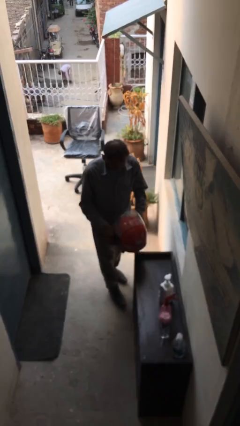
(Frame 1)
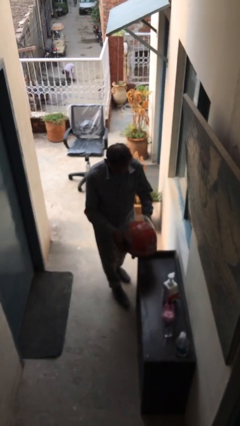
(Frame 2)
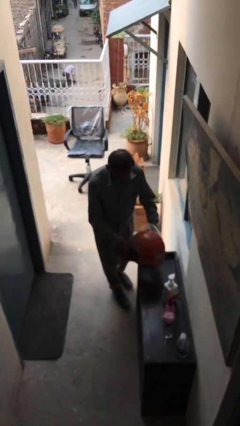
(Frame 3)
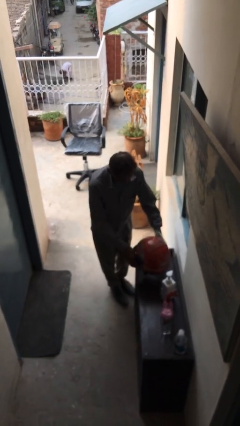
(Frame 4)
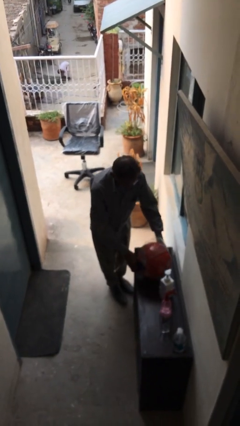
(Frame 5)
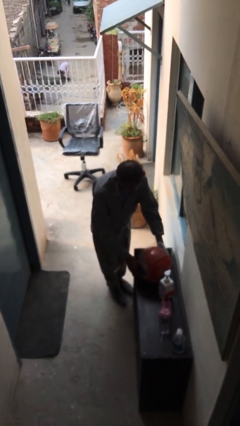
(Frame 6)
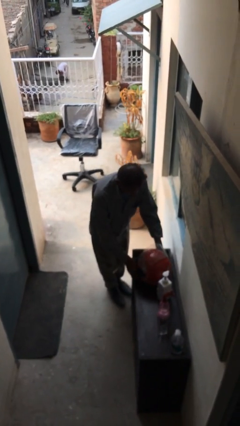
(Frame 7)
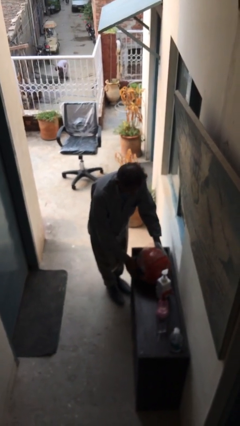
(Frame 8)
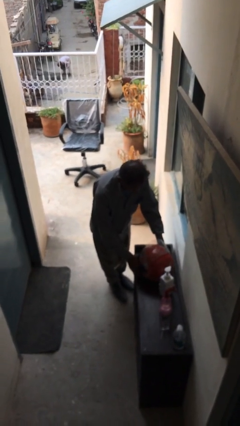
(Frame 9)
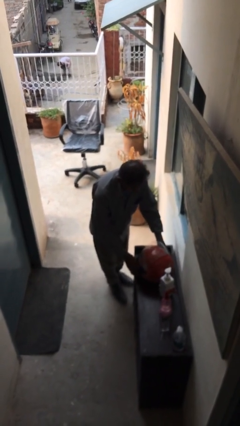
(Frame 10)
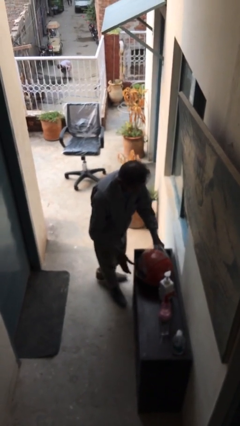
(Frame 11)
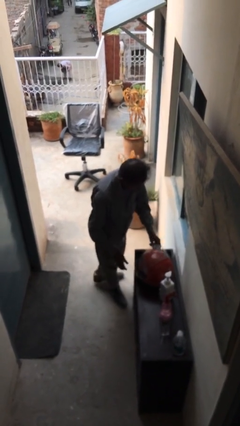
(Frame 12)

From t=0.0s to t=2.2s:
person puts down object on table

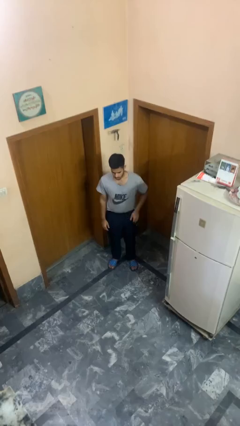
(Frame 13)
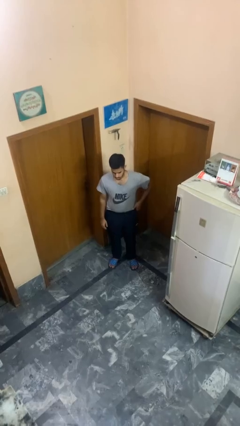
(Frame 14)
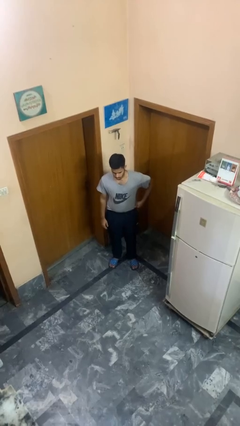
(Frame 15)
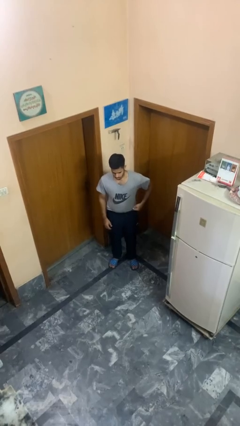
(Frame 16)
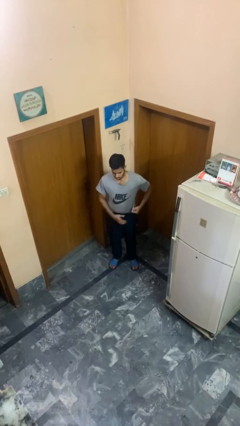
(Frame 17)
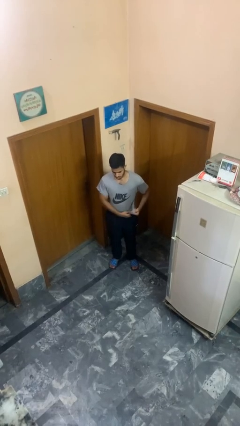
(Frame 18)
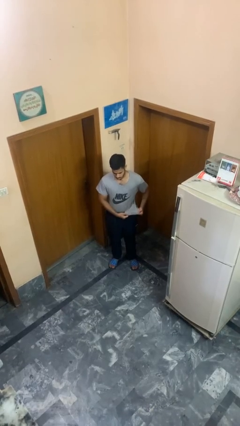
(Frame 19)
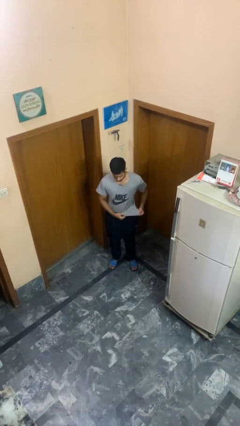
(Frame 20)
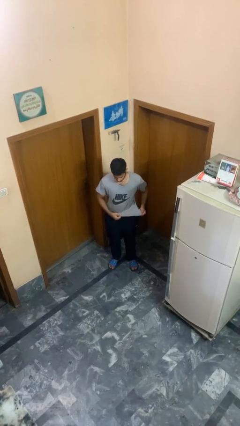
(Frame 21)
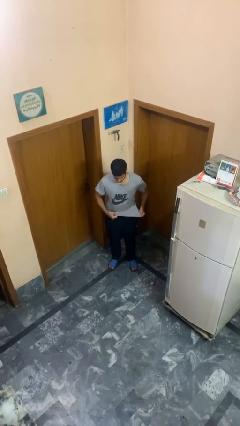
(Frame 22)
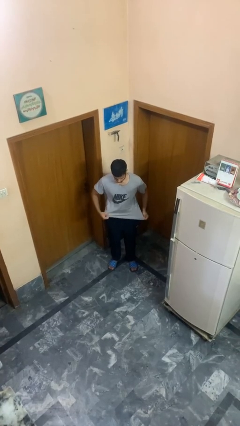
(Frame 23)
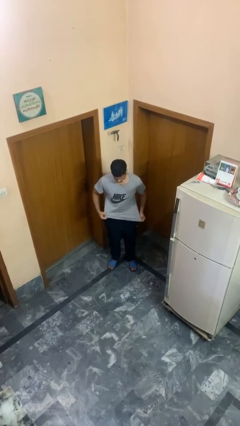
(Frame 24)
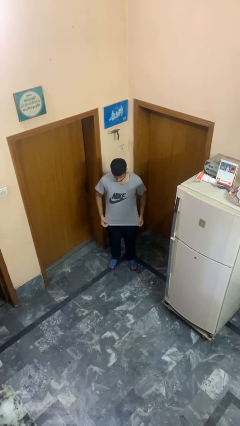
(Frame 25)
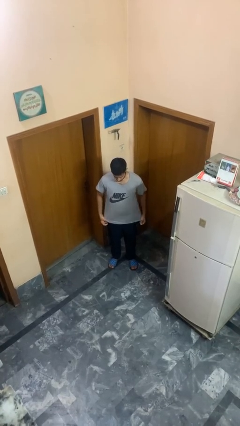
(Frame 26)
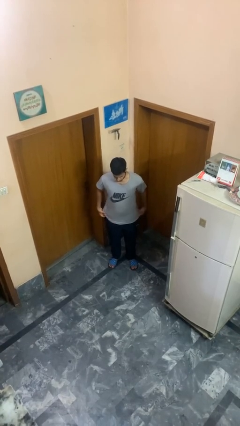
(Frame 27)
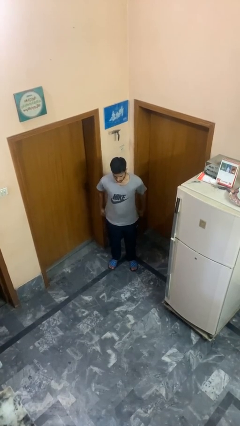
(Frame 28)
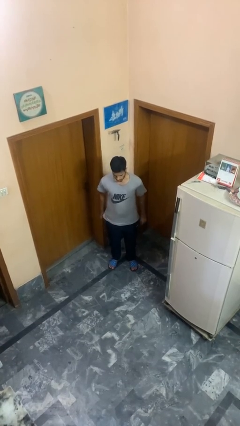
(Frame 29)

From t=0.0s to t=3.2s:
person untucks shirt

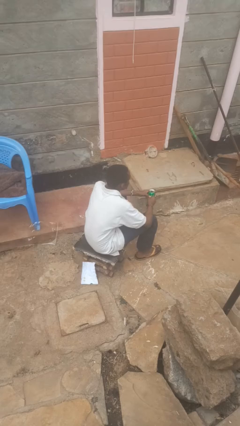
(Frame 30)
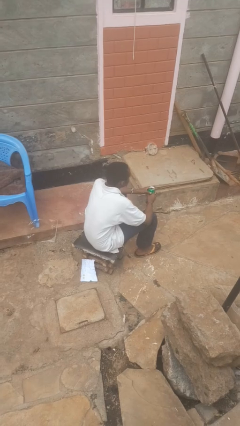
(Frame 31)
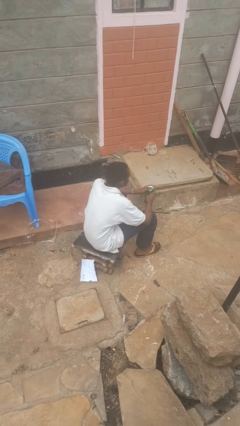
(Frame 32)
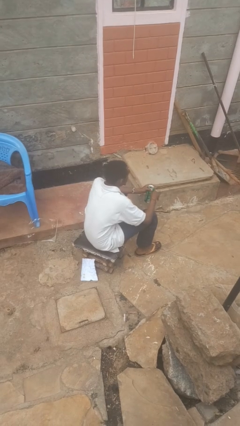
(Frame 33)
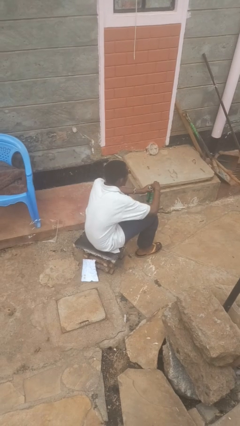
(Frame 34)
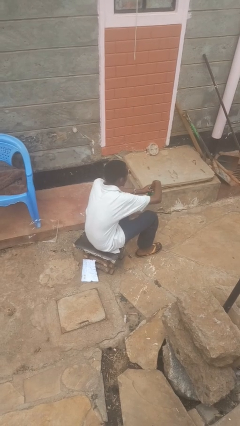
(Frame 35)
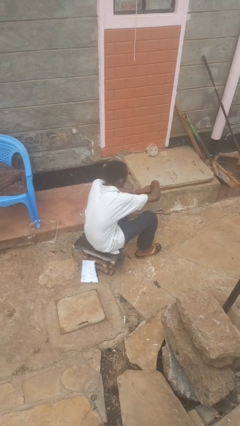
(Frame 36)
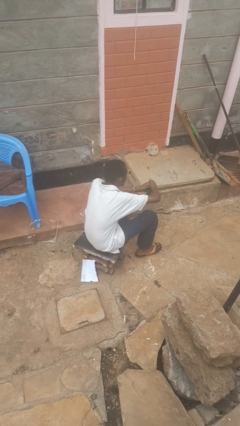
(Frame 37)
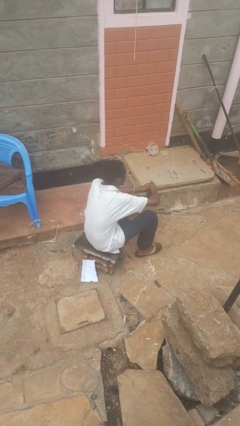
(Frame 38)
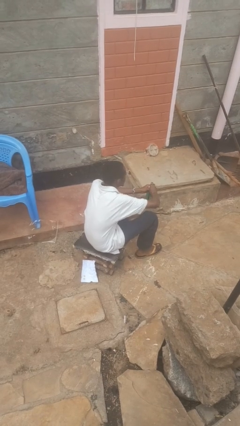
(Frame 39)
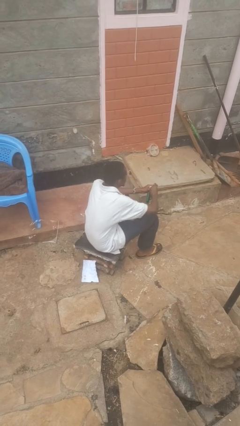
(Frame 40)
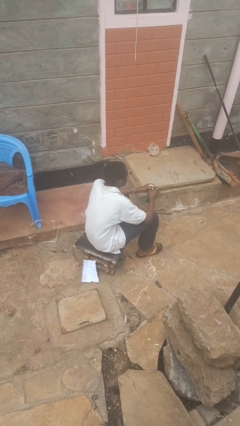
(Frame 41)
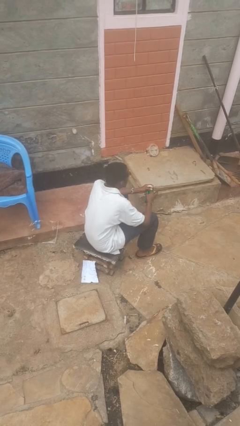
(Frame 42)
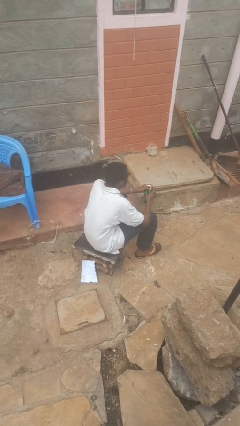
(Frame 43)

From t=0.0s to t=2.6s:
person opens beverage can

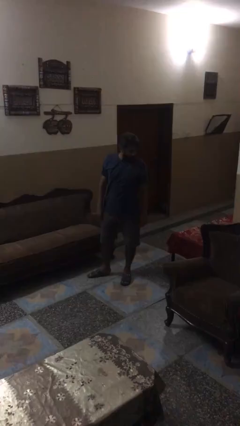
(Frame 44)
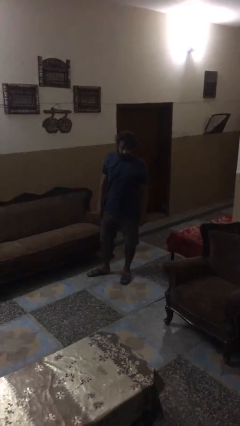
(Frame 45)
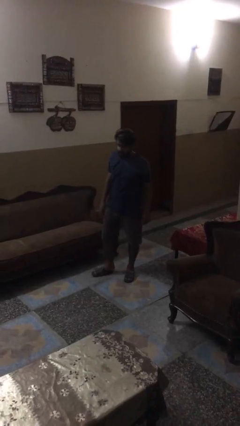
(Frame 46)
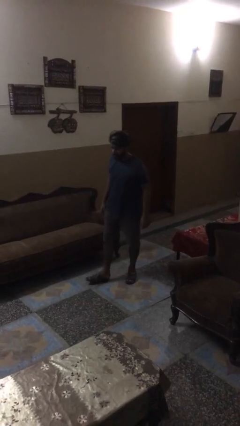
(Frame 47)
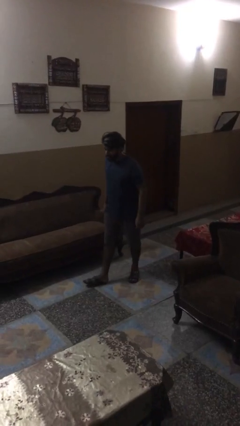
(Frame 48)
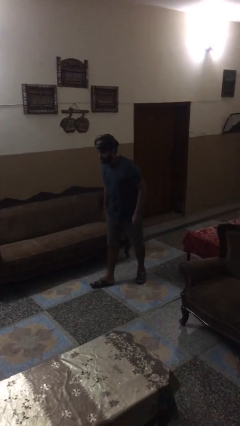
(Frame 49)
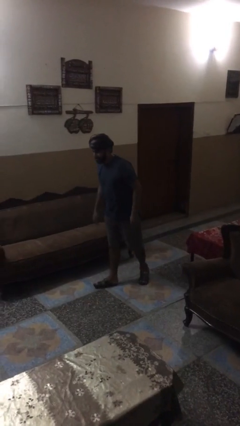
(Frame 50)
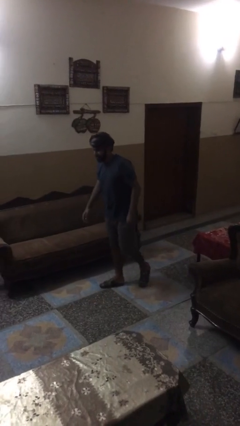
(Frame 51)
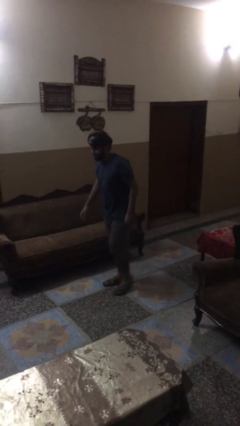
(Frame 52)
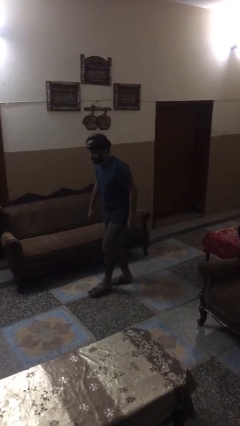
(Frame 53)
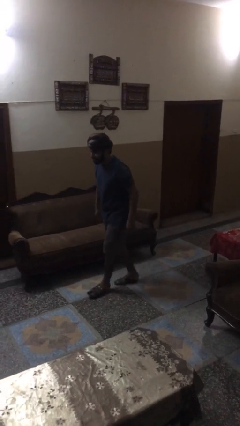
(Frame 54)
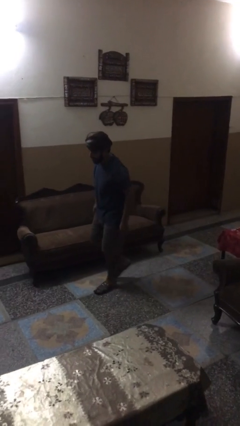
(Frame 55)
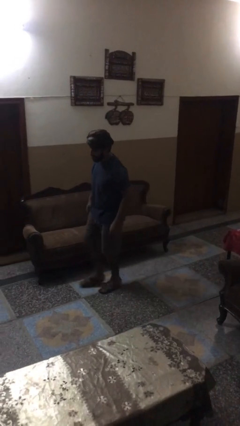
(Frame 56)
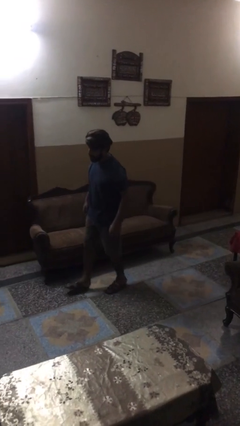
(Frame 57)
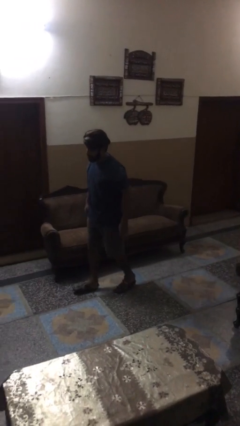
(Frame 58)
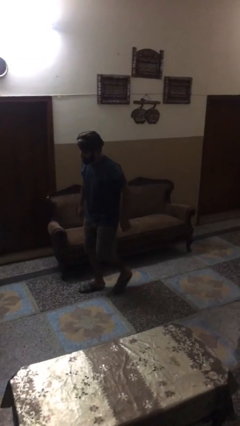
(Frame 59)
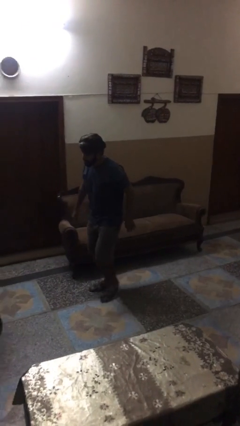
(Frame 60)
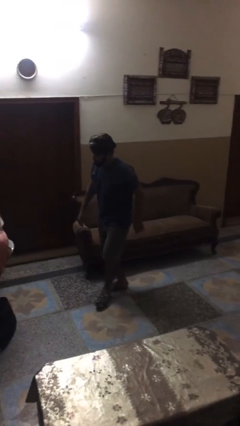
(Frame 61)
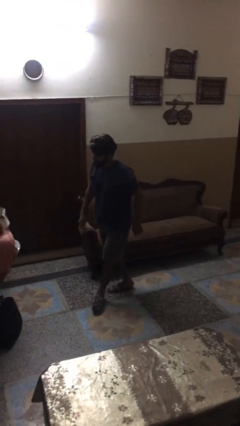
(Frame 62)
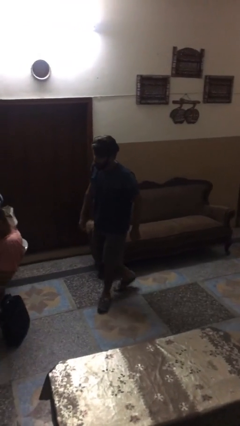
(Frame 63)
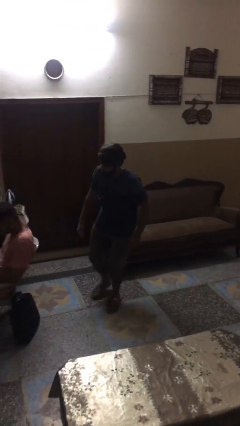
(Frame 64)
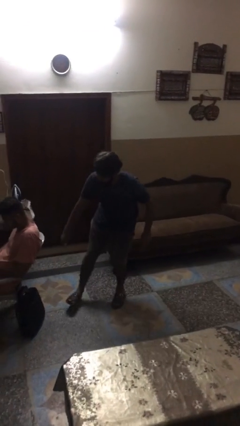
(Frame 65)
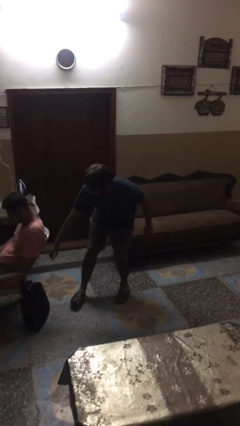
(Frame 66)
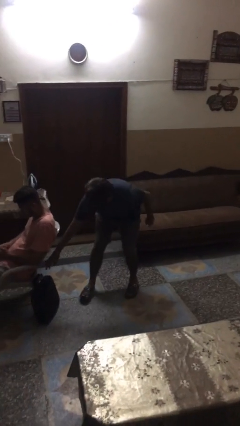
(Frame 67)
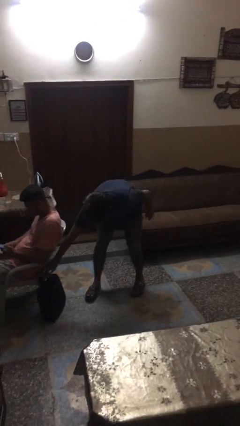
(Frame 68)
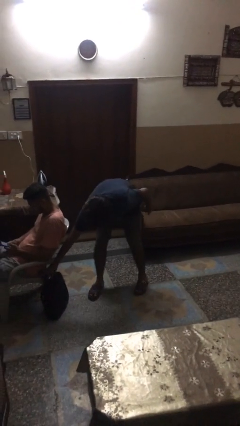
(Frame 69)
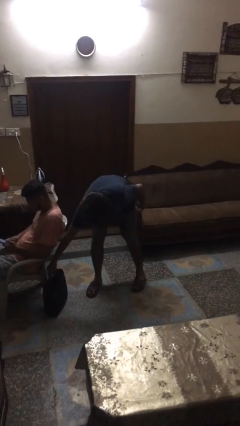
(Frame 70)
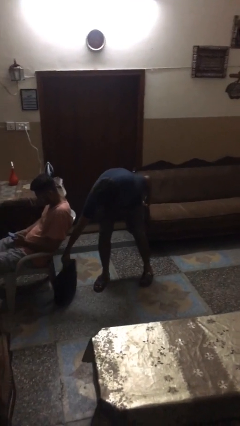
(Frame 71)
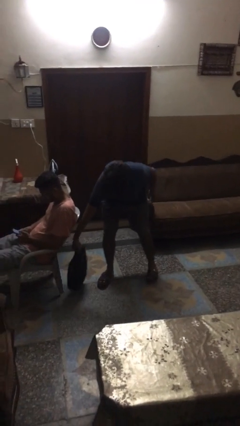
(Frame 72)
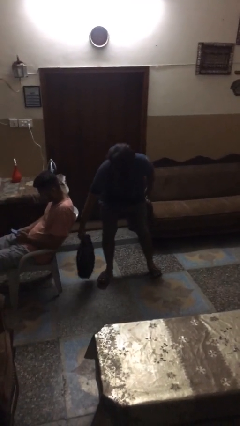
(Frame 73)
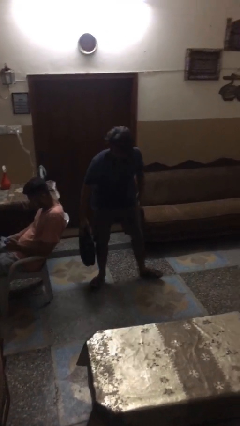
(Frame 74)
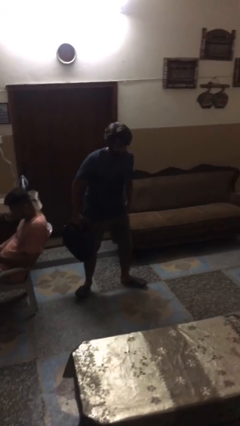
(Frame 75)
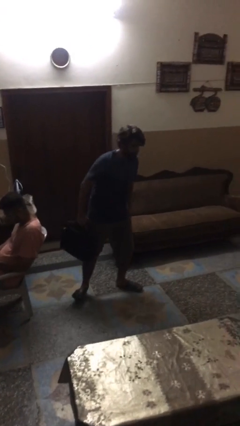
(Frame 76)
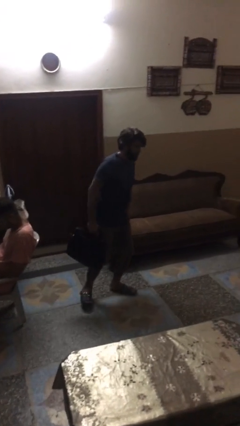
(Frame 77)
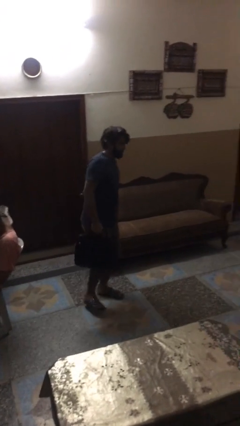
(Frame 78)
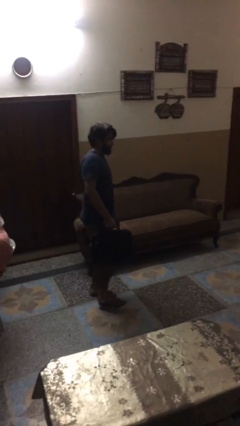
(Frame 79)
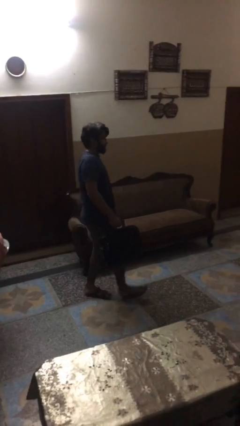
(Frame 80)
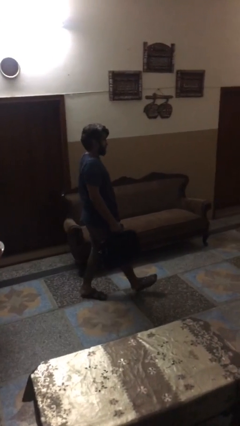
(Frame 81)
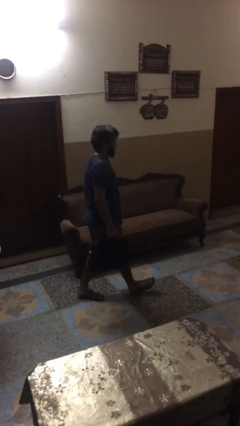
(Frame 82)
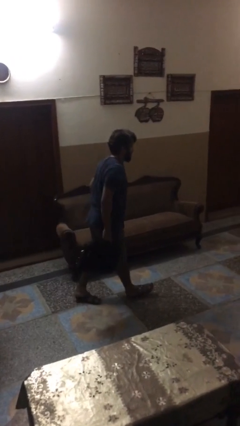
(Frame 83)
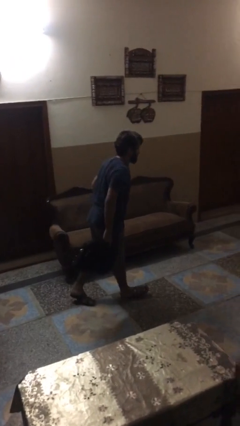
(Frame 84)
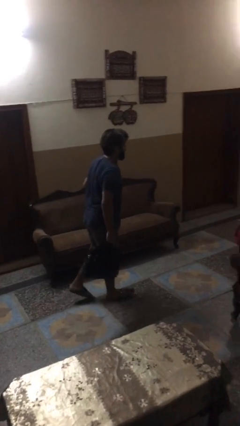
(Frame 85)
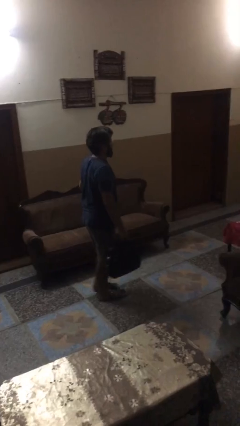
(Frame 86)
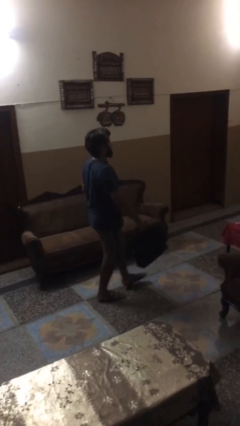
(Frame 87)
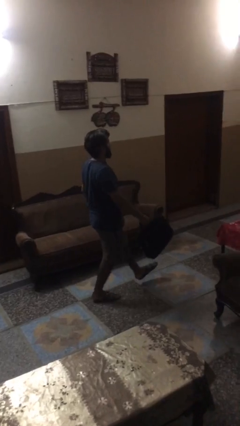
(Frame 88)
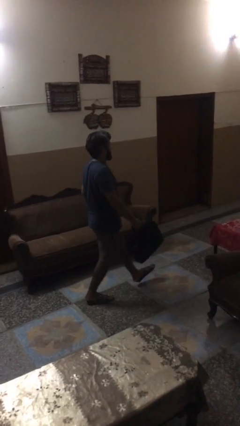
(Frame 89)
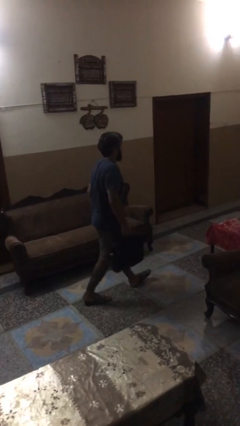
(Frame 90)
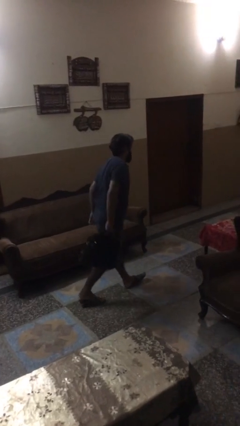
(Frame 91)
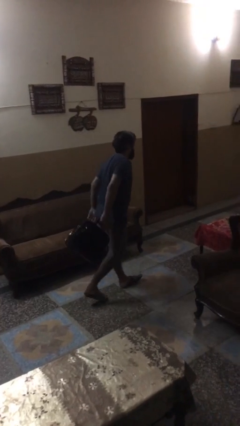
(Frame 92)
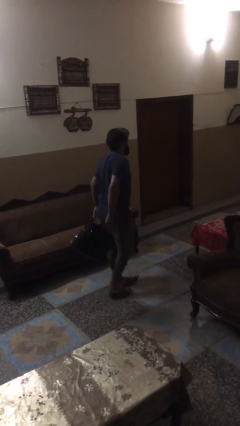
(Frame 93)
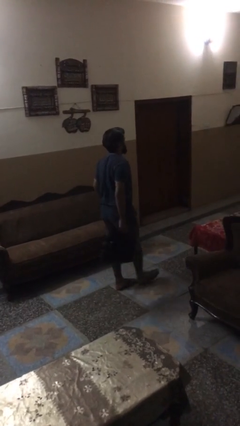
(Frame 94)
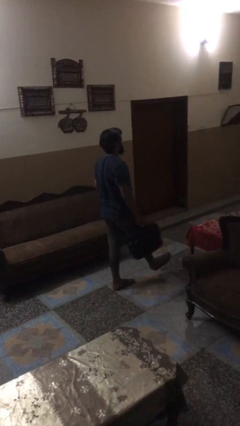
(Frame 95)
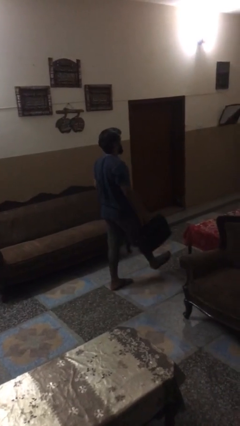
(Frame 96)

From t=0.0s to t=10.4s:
person steals object from person
